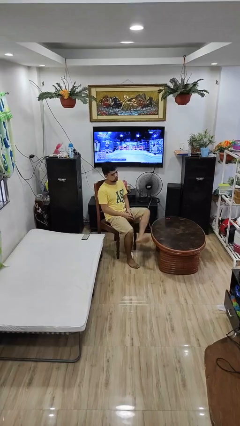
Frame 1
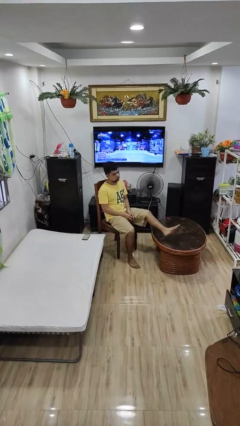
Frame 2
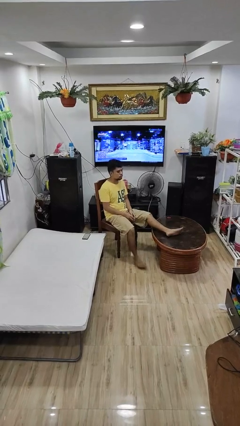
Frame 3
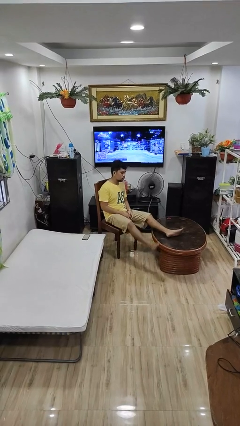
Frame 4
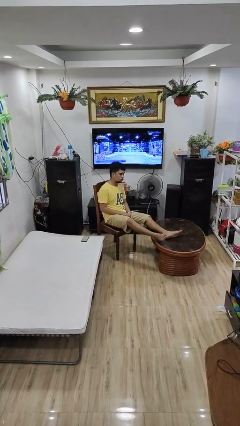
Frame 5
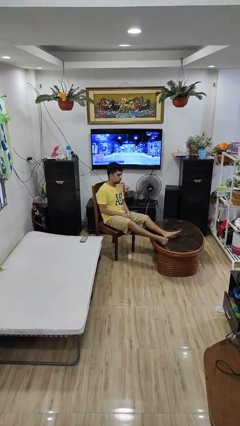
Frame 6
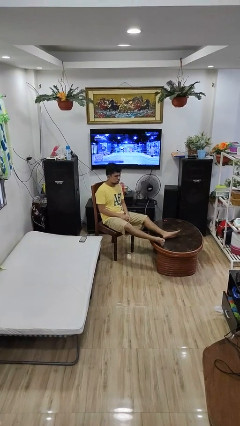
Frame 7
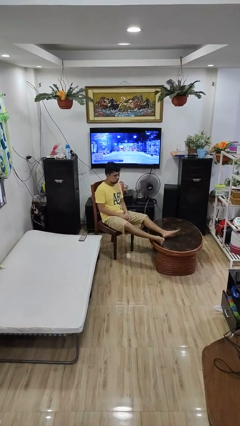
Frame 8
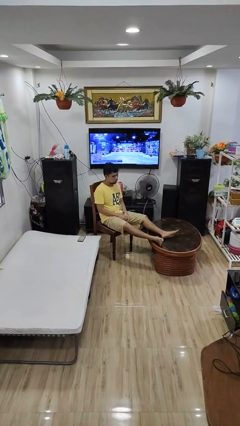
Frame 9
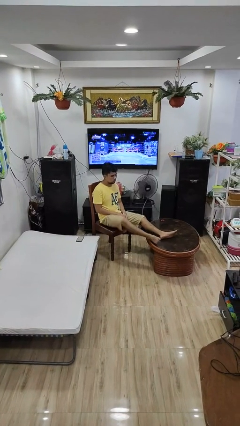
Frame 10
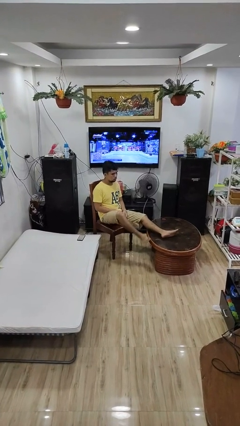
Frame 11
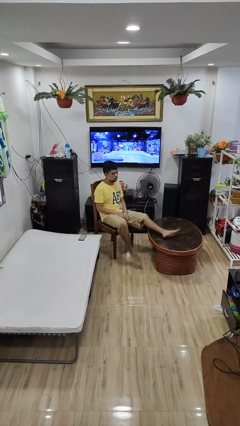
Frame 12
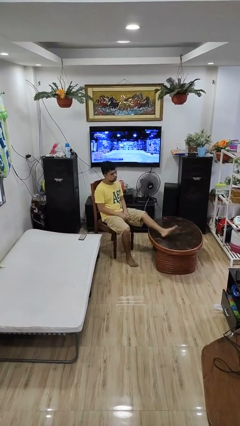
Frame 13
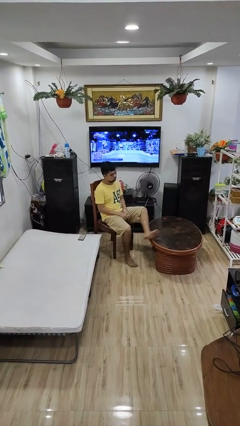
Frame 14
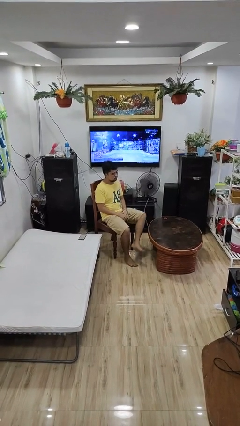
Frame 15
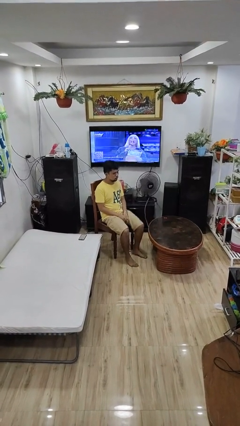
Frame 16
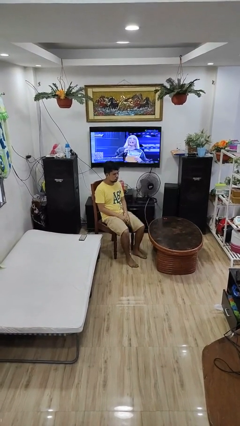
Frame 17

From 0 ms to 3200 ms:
person puts feet up

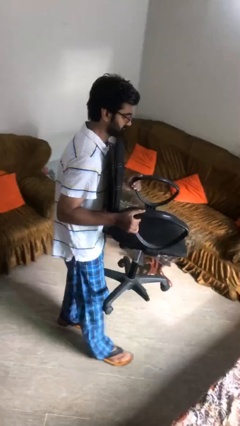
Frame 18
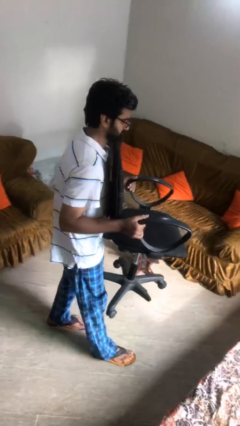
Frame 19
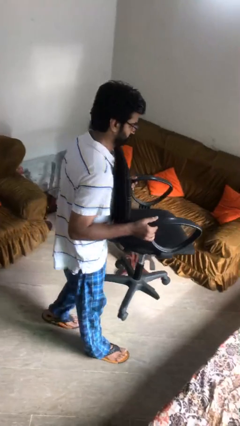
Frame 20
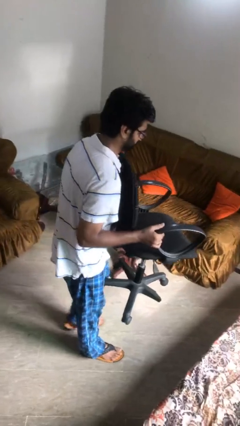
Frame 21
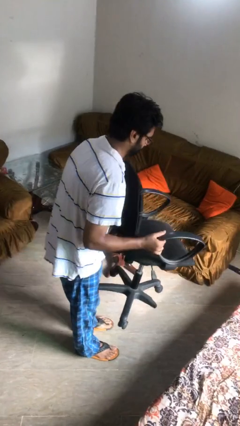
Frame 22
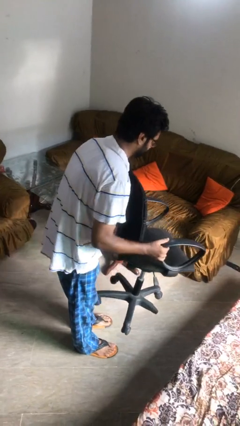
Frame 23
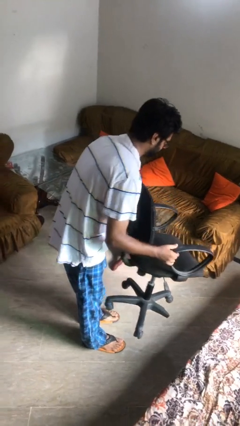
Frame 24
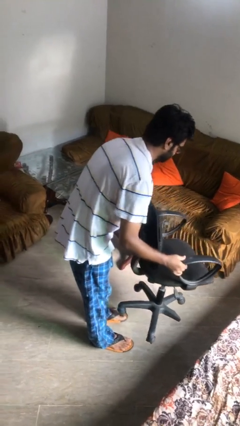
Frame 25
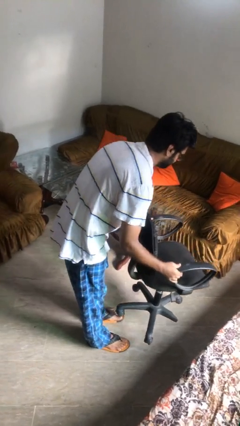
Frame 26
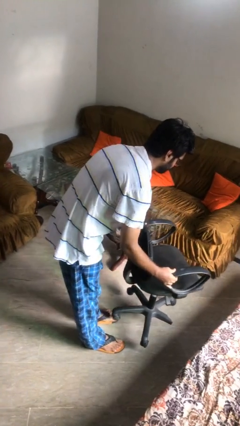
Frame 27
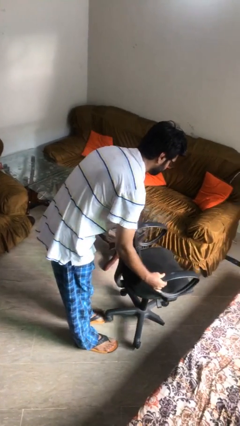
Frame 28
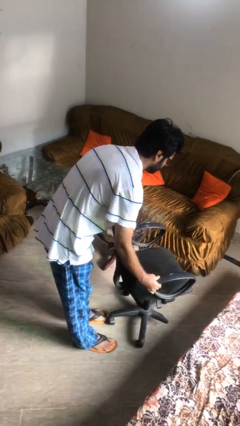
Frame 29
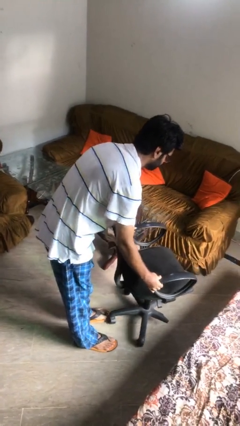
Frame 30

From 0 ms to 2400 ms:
person puts down object on floor

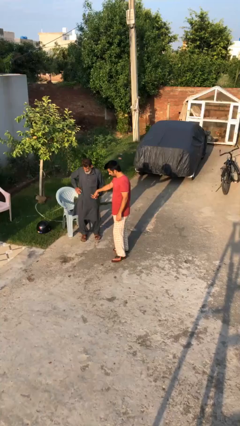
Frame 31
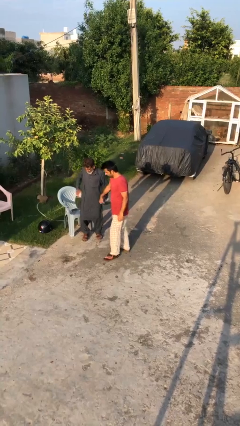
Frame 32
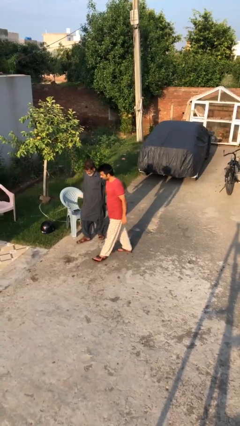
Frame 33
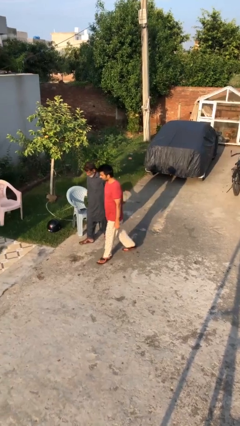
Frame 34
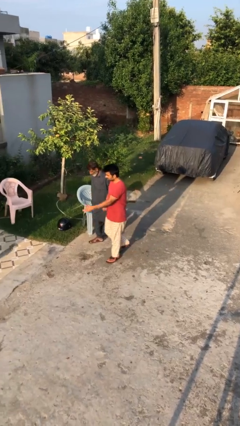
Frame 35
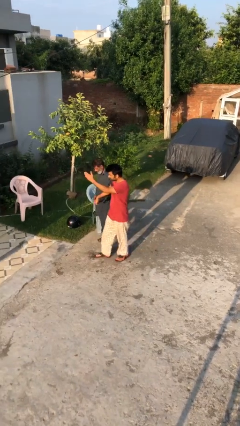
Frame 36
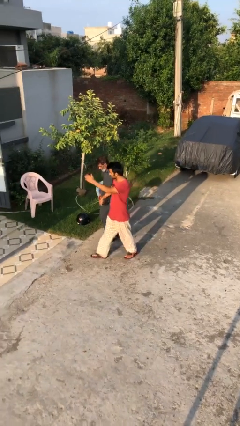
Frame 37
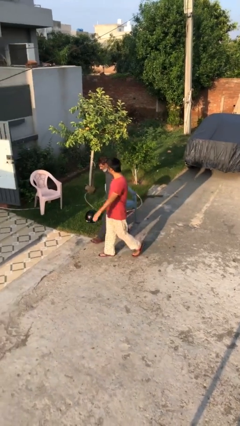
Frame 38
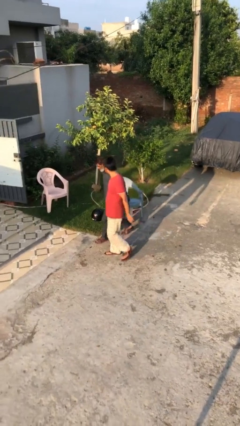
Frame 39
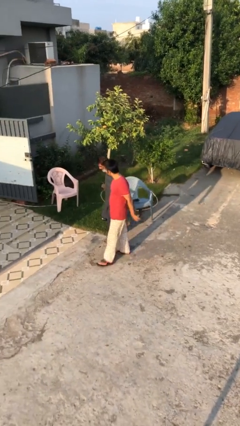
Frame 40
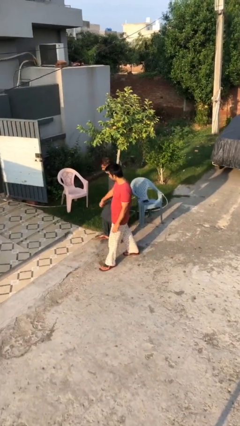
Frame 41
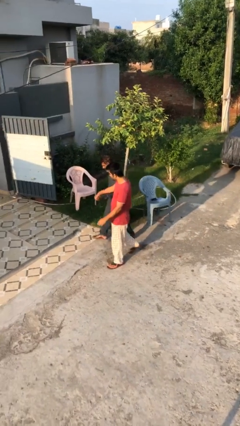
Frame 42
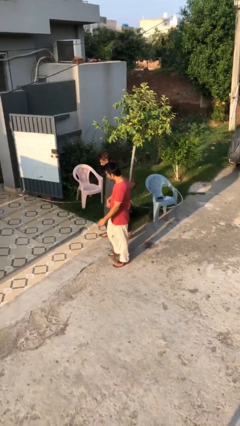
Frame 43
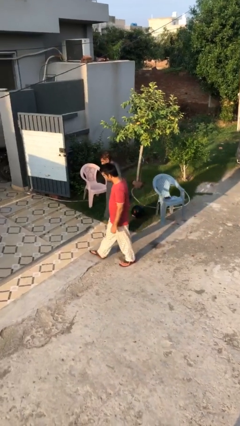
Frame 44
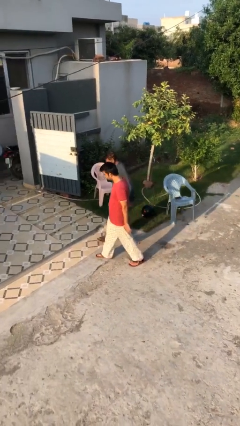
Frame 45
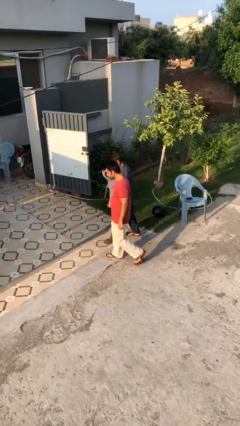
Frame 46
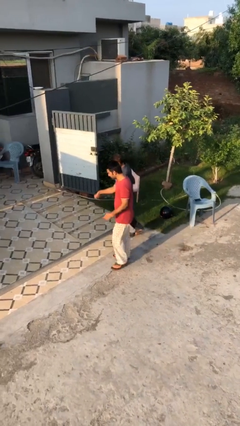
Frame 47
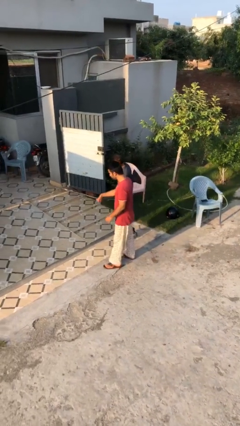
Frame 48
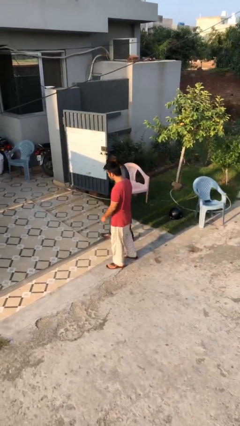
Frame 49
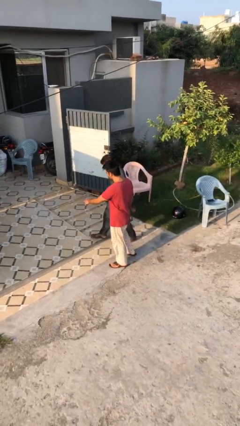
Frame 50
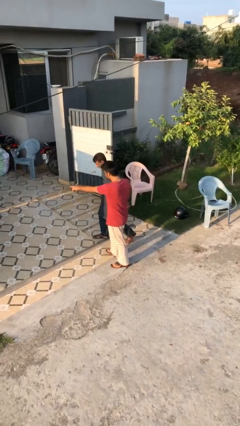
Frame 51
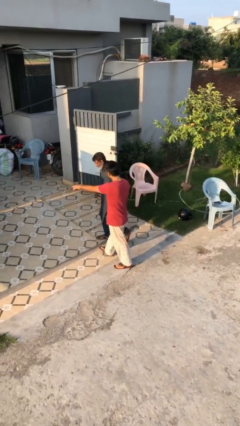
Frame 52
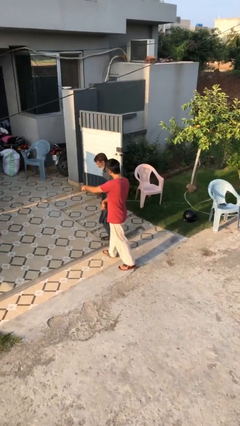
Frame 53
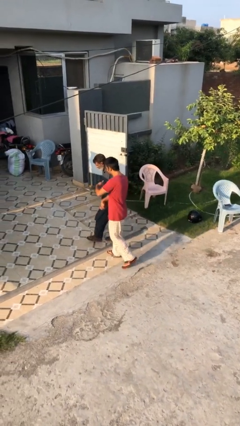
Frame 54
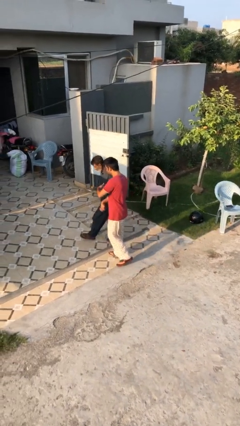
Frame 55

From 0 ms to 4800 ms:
person holds hand

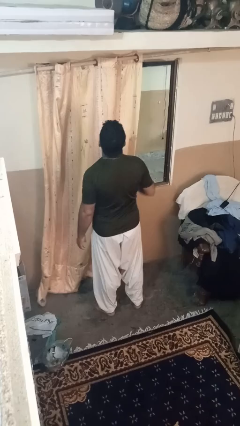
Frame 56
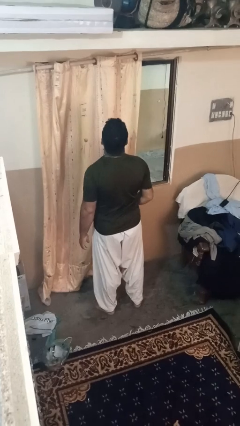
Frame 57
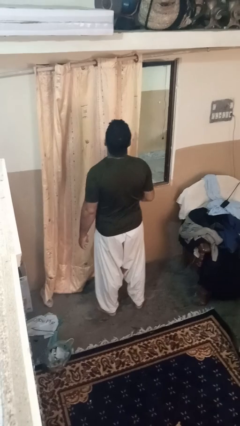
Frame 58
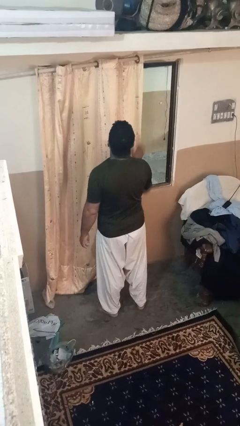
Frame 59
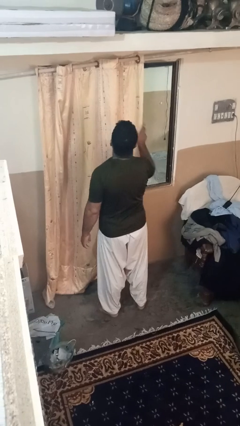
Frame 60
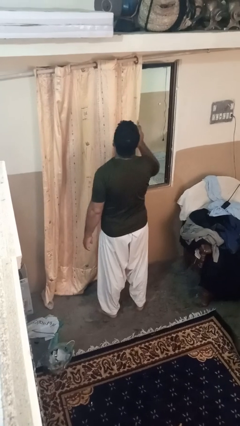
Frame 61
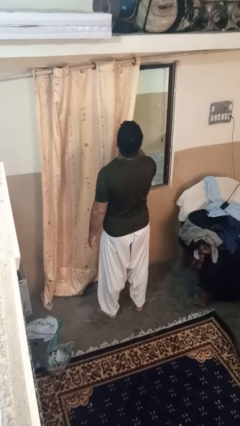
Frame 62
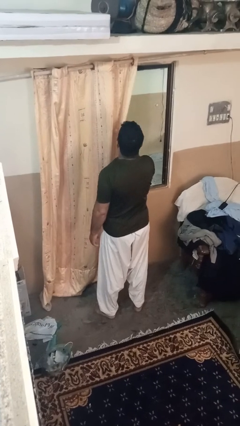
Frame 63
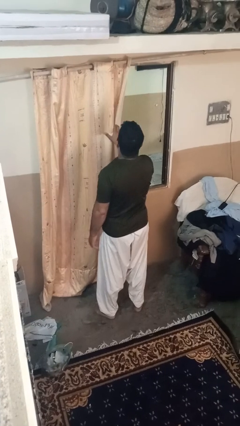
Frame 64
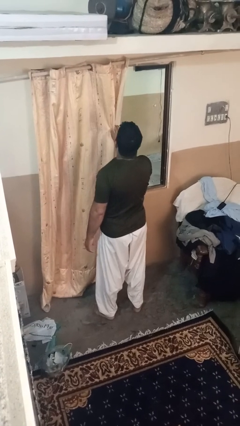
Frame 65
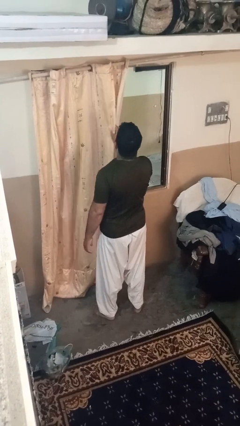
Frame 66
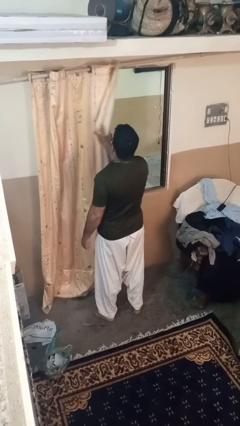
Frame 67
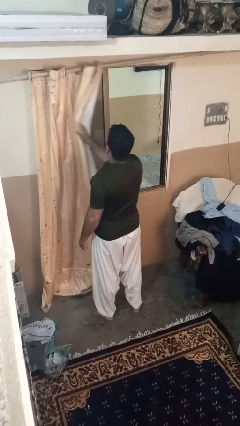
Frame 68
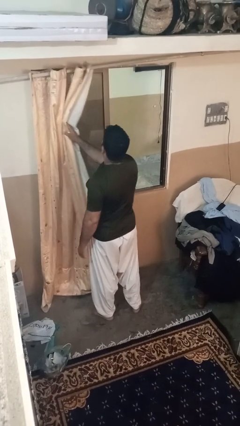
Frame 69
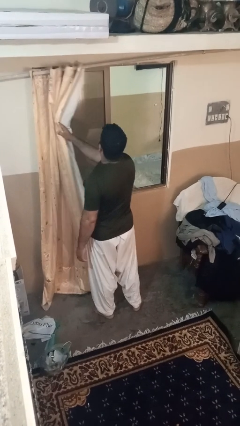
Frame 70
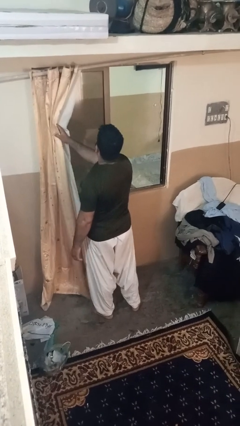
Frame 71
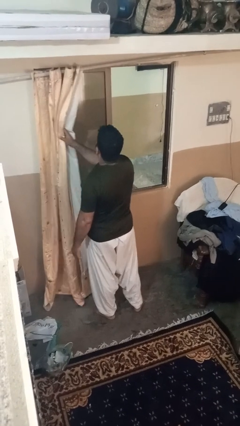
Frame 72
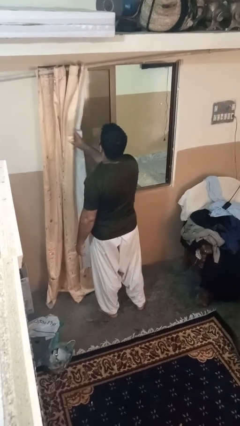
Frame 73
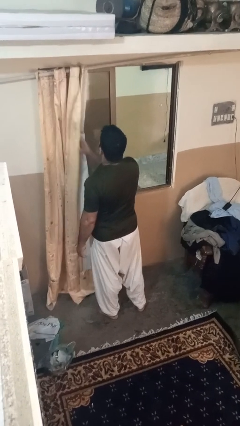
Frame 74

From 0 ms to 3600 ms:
person opens curtains

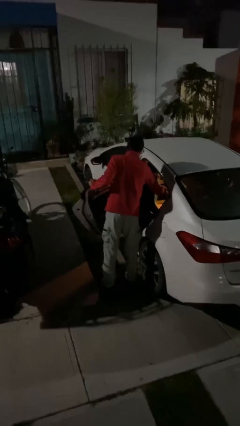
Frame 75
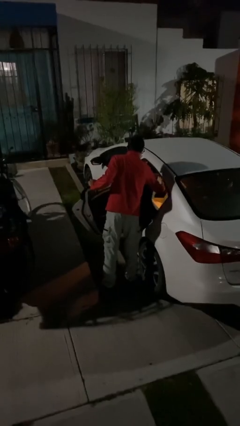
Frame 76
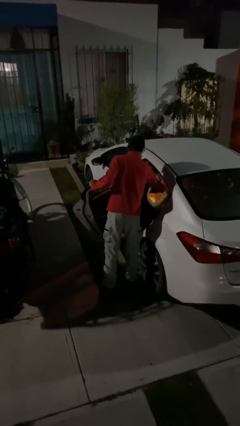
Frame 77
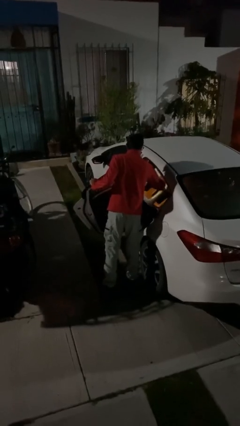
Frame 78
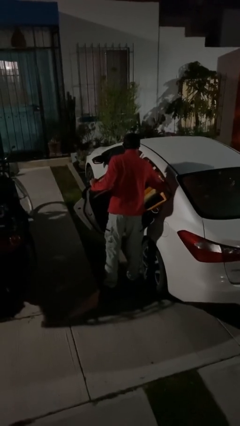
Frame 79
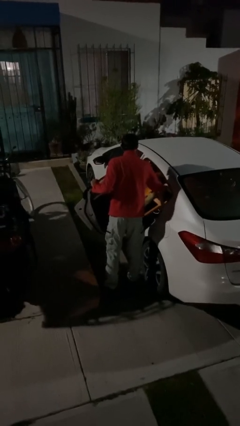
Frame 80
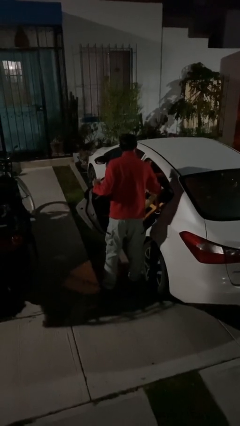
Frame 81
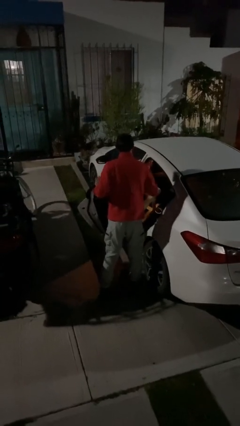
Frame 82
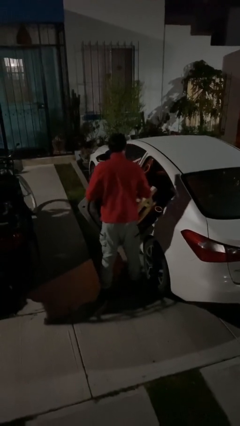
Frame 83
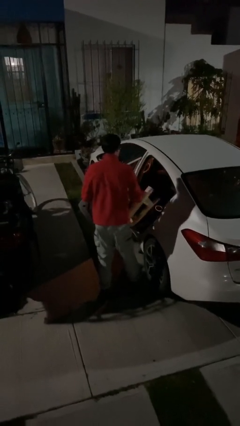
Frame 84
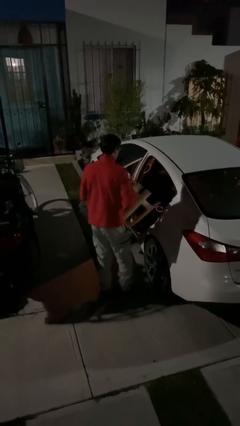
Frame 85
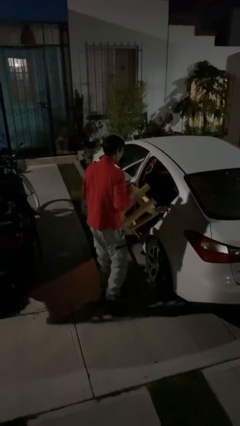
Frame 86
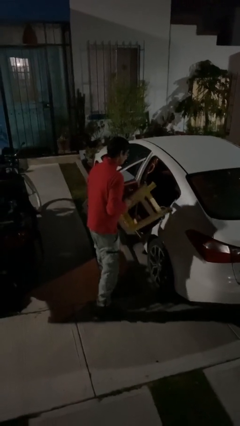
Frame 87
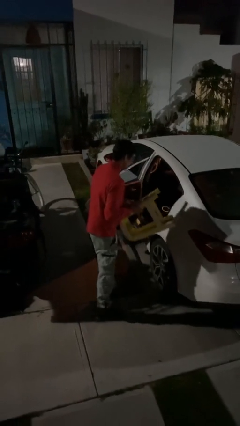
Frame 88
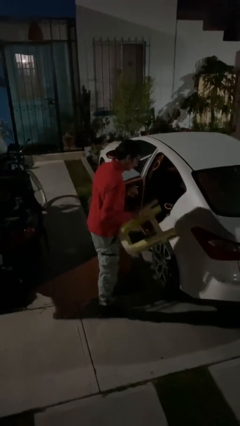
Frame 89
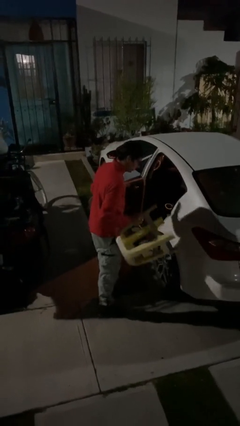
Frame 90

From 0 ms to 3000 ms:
person unloads car

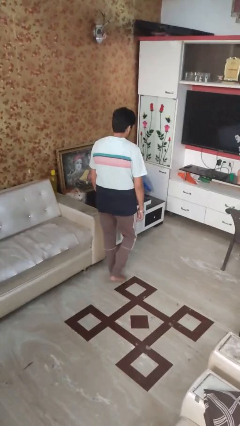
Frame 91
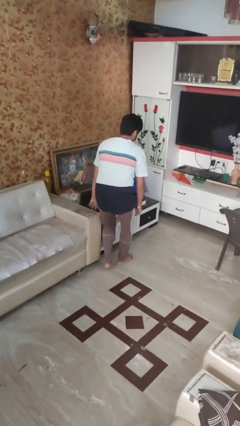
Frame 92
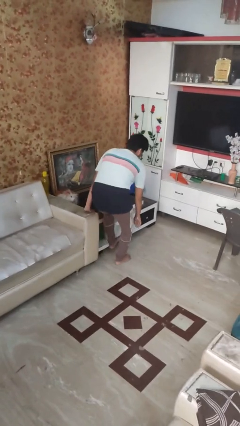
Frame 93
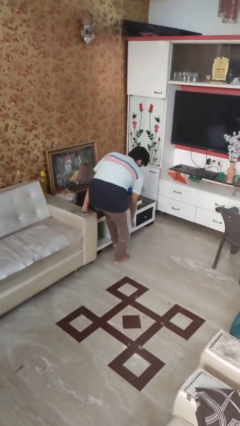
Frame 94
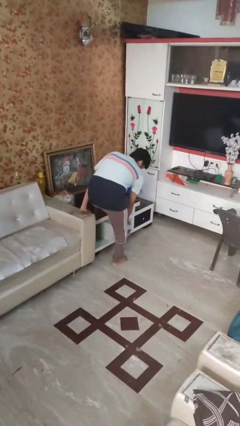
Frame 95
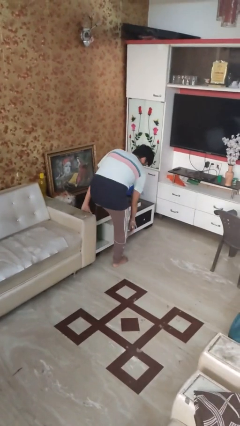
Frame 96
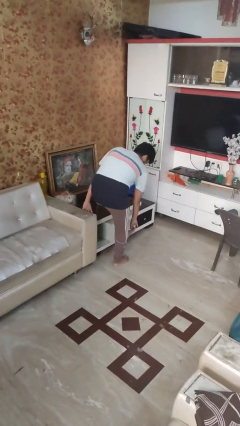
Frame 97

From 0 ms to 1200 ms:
person bumps into table
